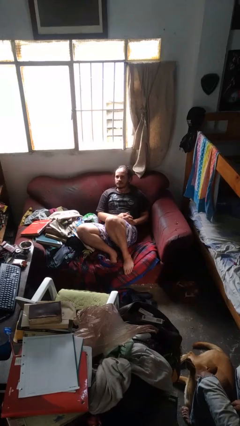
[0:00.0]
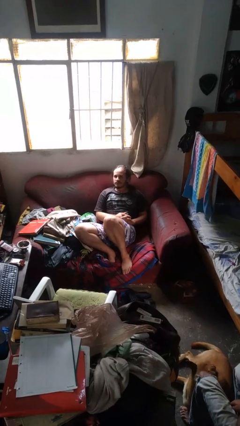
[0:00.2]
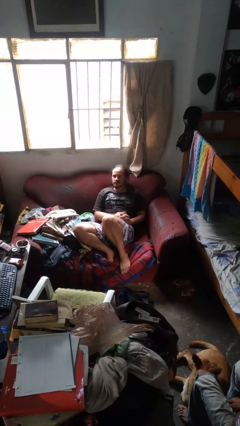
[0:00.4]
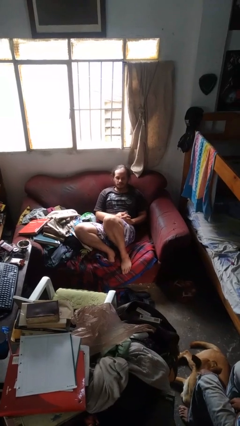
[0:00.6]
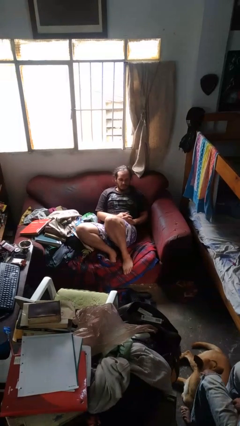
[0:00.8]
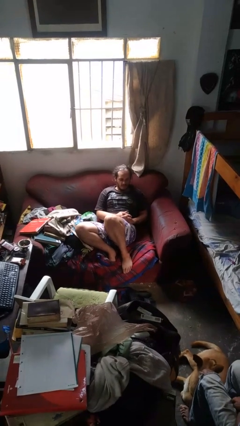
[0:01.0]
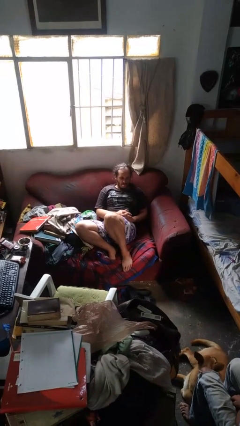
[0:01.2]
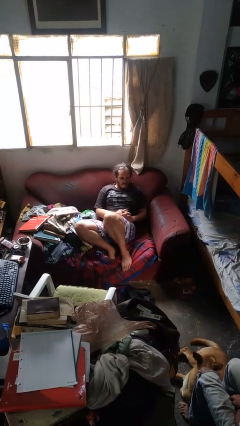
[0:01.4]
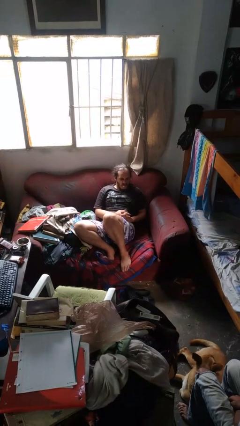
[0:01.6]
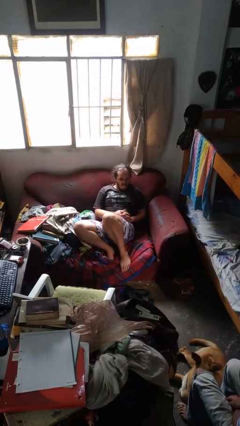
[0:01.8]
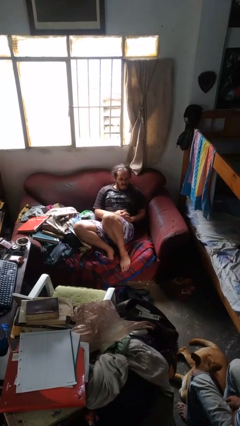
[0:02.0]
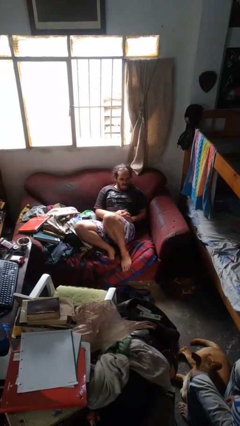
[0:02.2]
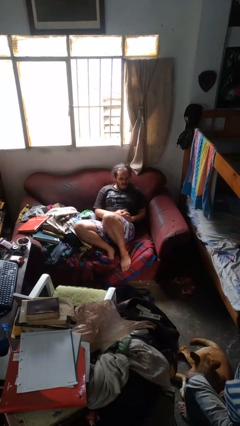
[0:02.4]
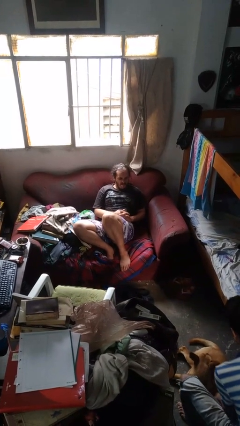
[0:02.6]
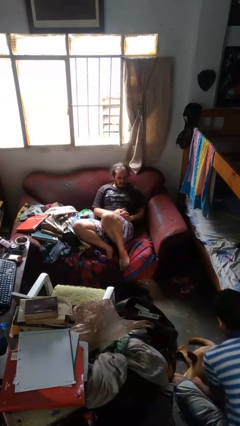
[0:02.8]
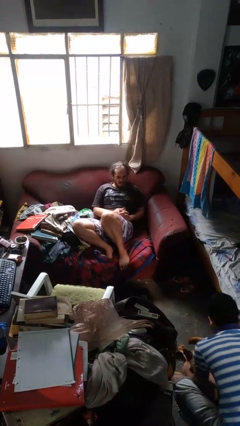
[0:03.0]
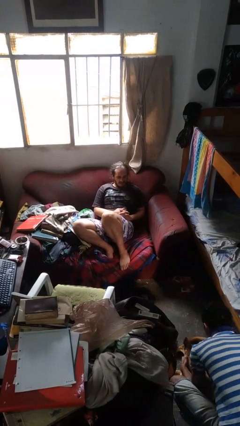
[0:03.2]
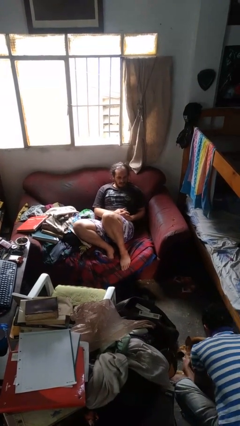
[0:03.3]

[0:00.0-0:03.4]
person sticks out tongue

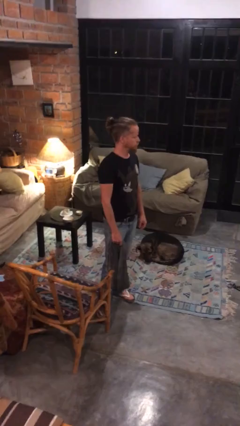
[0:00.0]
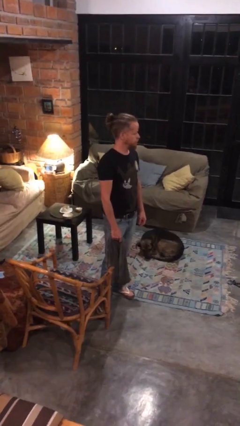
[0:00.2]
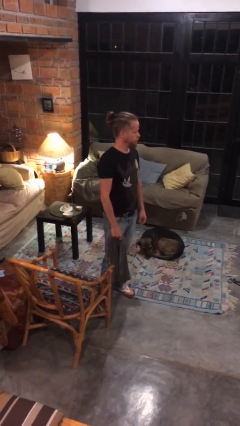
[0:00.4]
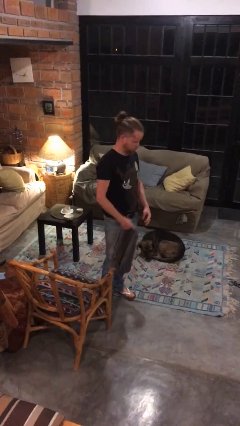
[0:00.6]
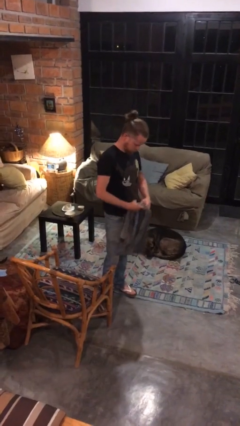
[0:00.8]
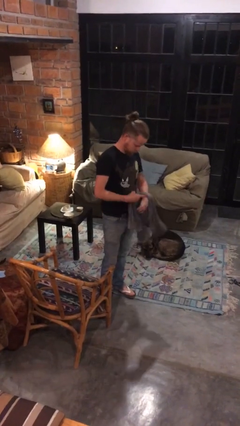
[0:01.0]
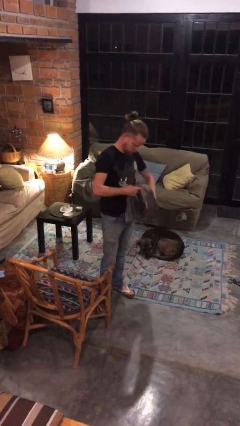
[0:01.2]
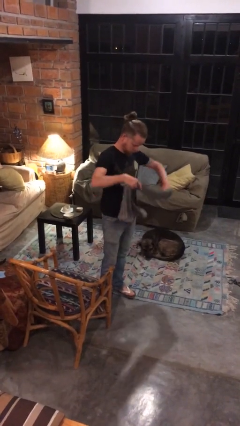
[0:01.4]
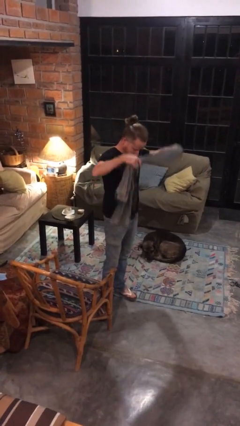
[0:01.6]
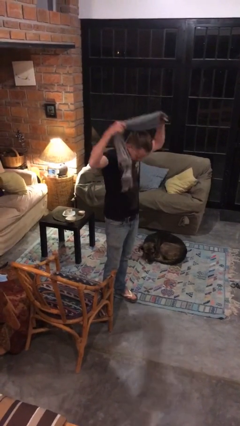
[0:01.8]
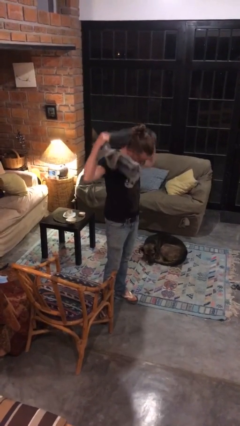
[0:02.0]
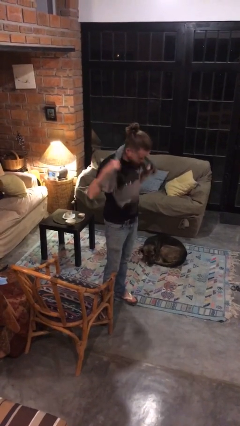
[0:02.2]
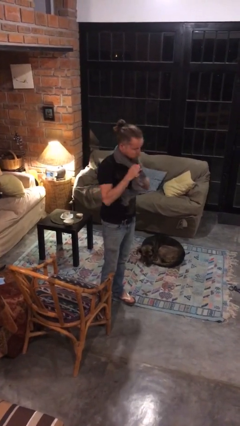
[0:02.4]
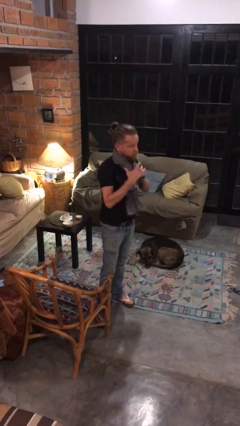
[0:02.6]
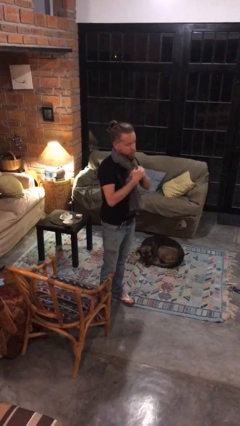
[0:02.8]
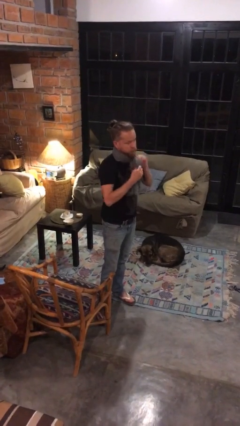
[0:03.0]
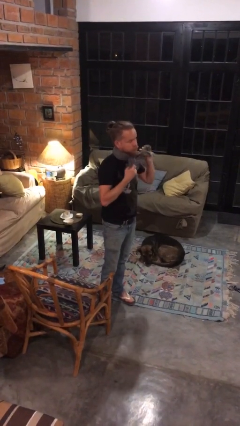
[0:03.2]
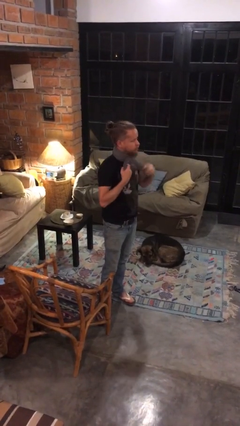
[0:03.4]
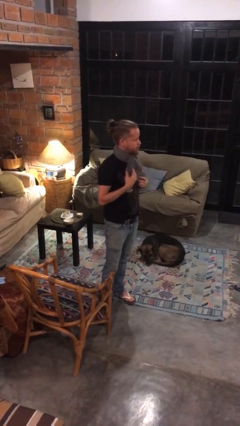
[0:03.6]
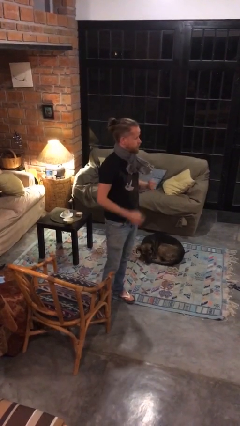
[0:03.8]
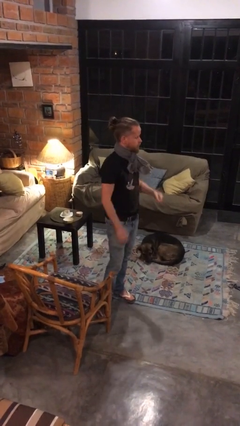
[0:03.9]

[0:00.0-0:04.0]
person puts on scarf

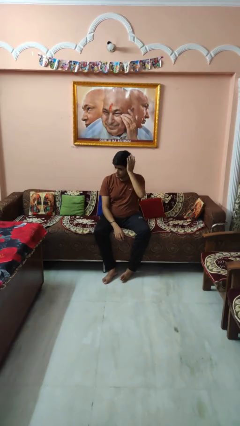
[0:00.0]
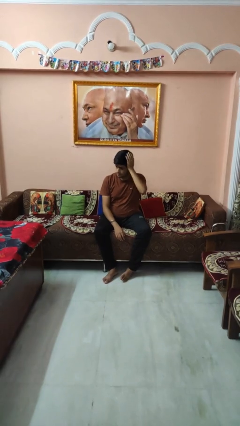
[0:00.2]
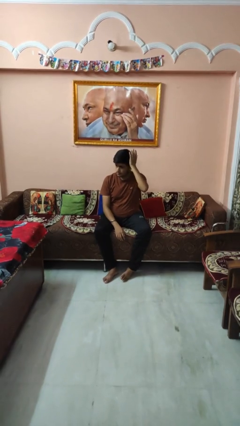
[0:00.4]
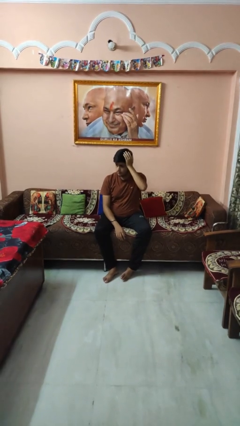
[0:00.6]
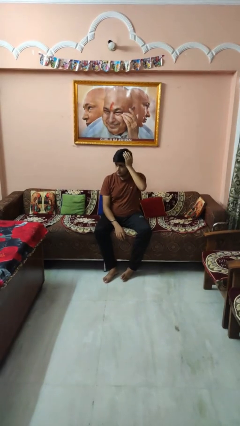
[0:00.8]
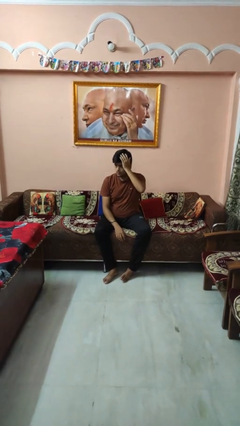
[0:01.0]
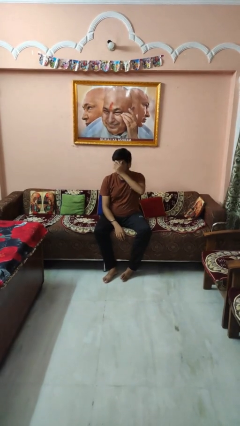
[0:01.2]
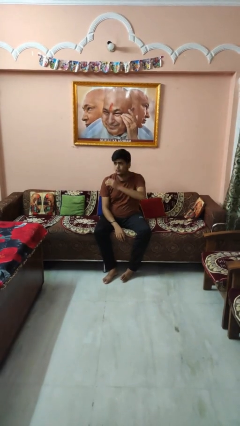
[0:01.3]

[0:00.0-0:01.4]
person pats head

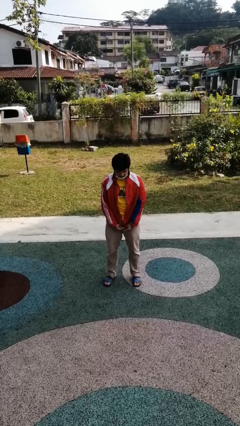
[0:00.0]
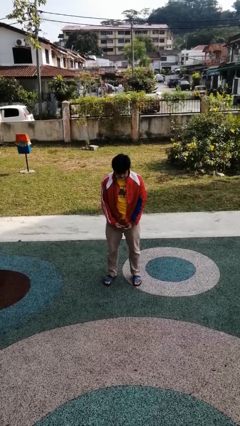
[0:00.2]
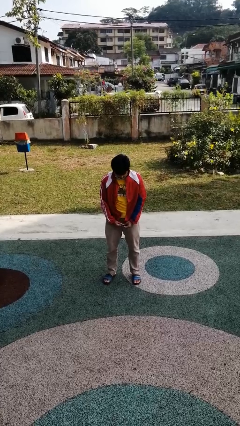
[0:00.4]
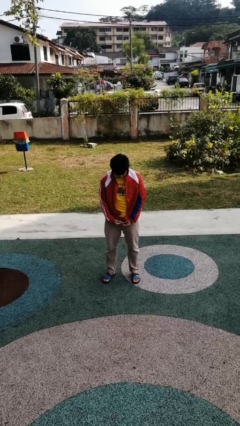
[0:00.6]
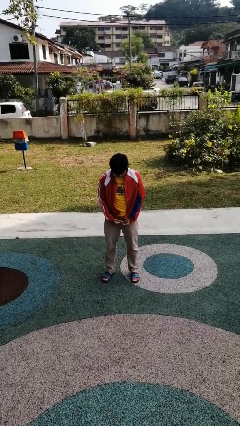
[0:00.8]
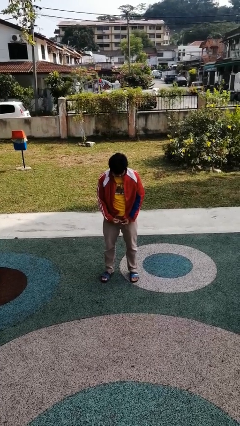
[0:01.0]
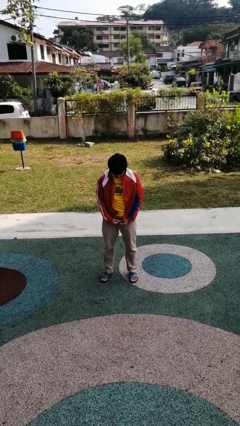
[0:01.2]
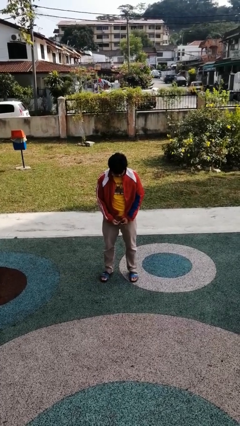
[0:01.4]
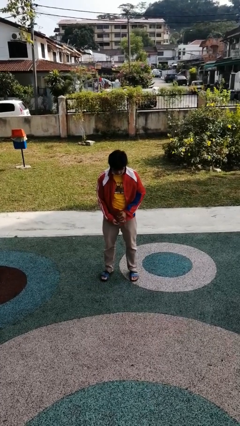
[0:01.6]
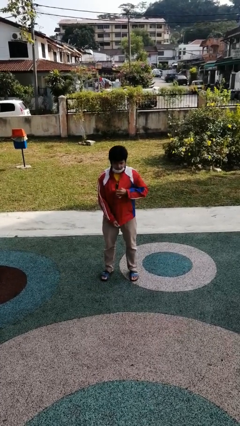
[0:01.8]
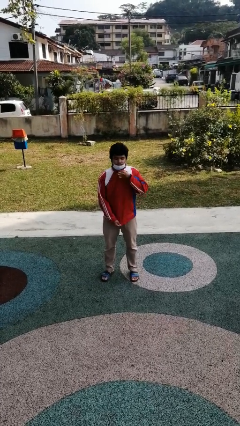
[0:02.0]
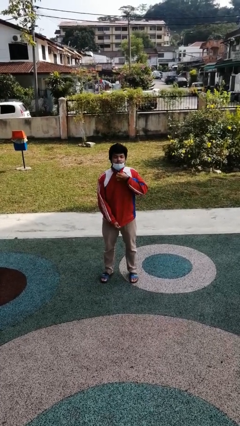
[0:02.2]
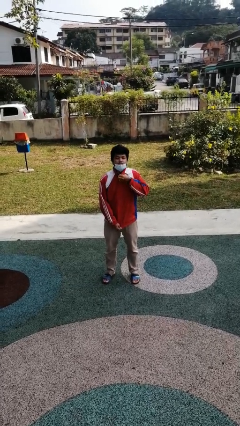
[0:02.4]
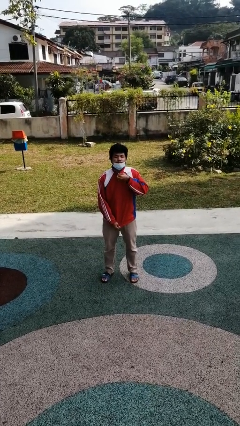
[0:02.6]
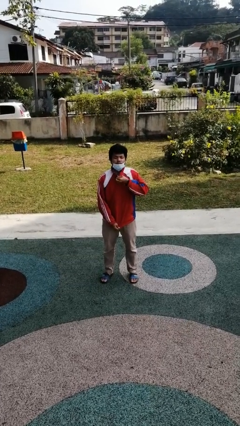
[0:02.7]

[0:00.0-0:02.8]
person zips up jacket

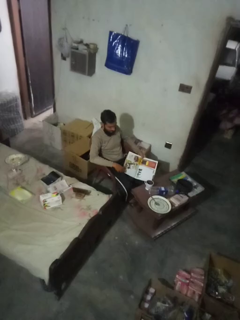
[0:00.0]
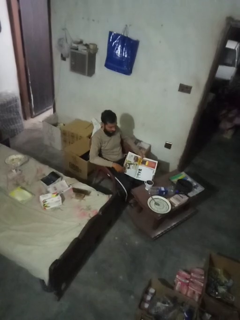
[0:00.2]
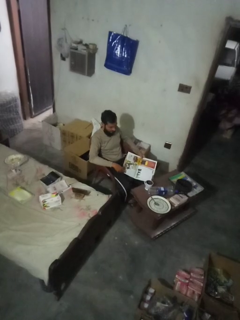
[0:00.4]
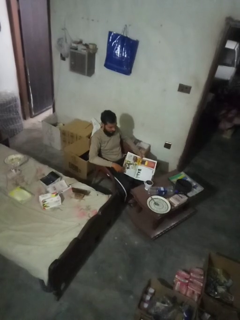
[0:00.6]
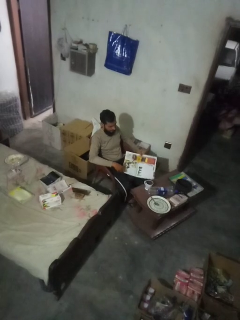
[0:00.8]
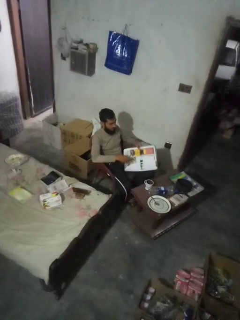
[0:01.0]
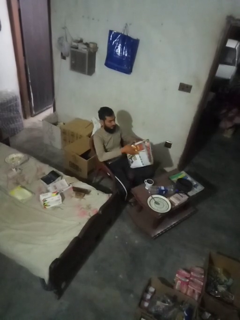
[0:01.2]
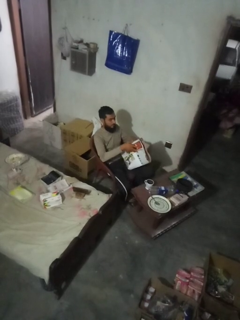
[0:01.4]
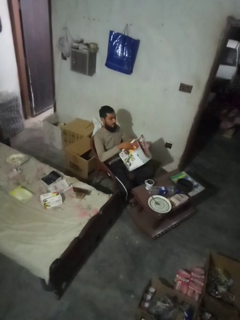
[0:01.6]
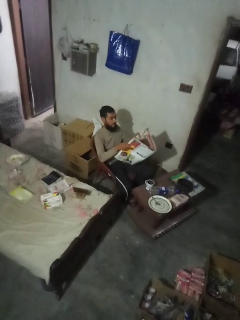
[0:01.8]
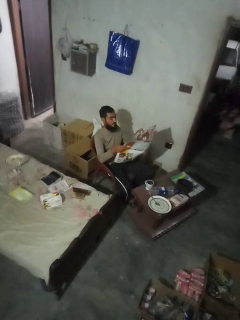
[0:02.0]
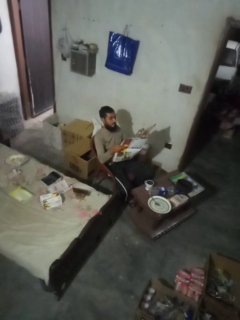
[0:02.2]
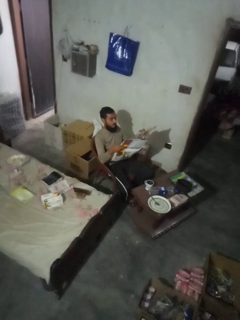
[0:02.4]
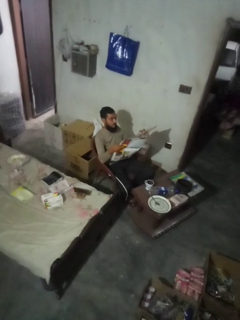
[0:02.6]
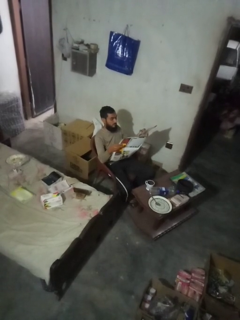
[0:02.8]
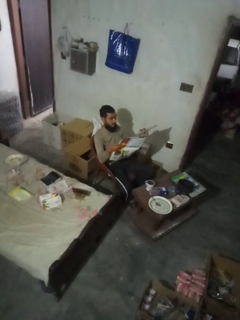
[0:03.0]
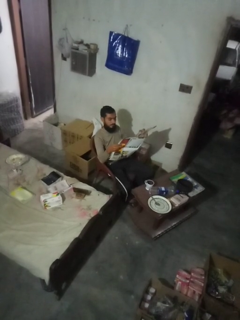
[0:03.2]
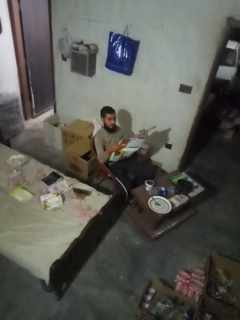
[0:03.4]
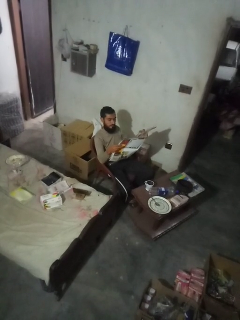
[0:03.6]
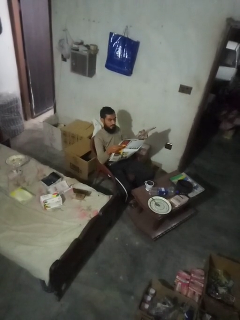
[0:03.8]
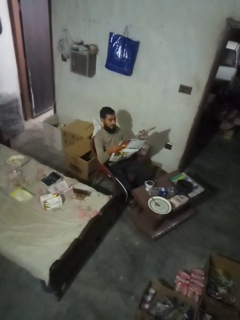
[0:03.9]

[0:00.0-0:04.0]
person reads newspaper

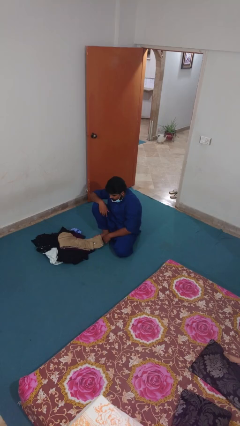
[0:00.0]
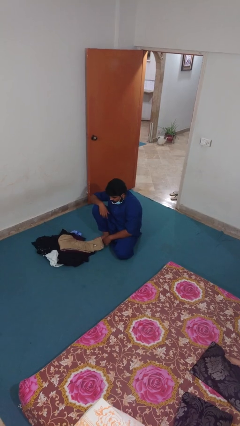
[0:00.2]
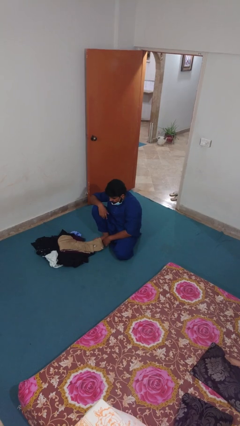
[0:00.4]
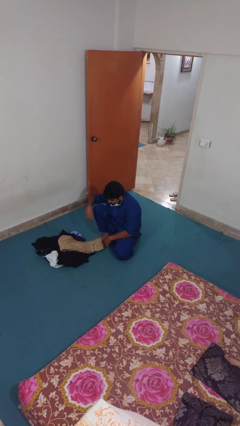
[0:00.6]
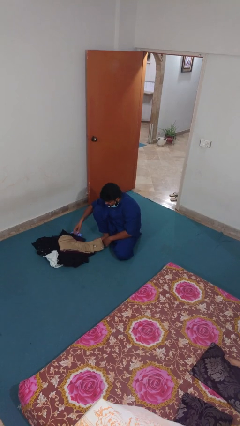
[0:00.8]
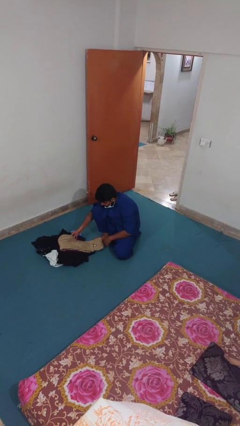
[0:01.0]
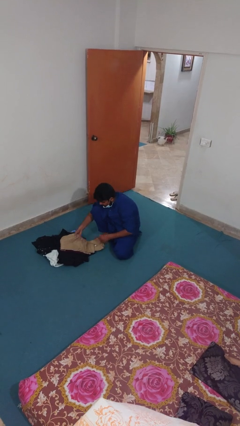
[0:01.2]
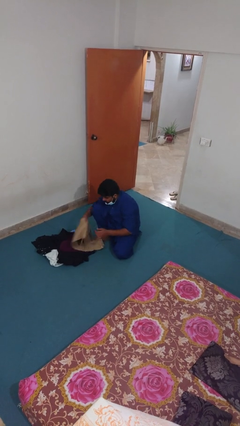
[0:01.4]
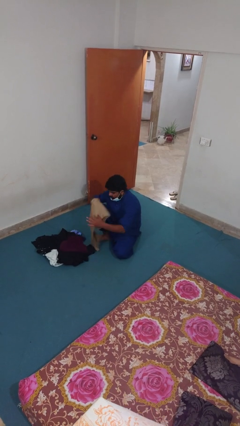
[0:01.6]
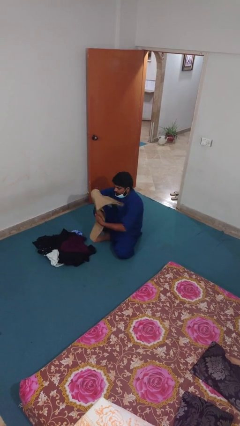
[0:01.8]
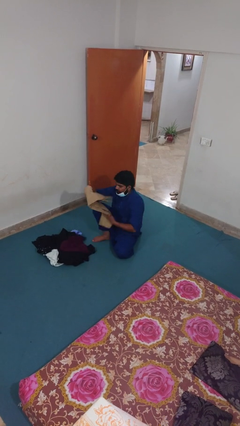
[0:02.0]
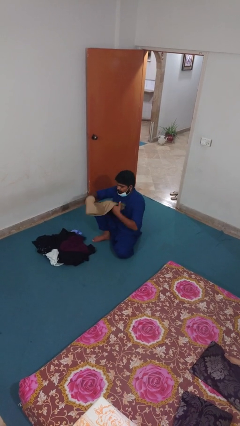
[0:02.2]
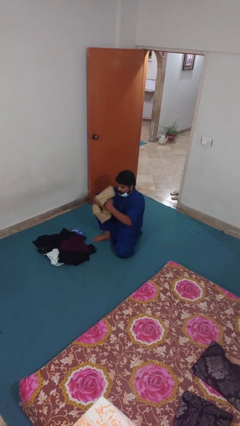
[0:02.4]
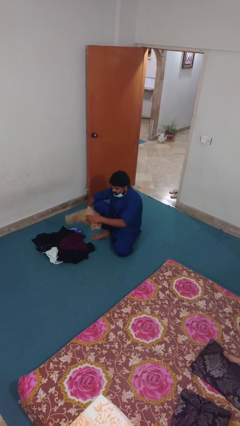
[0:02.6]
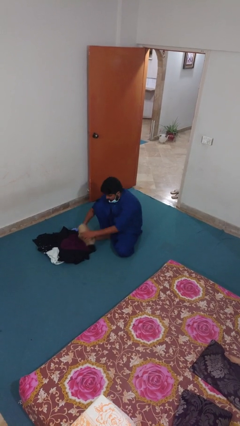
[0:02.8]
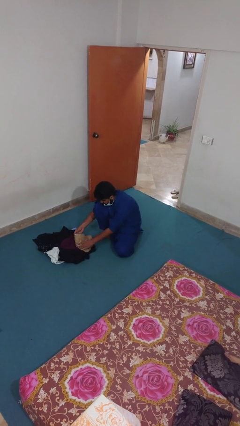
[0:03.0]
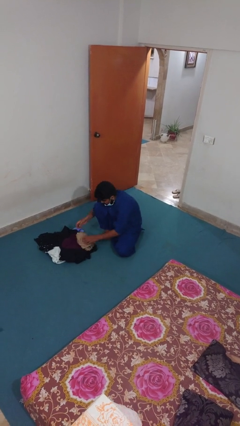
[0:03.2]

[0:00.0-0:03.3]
person folds pants
